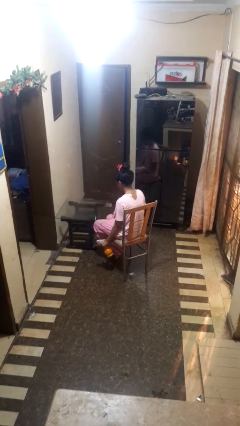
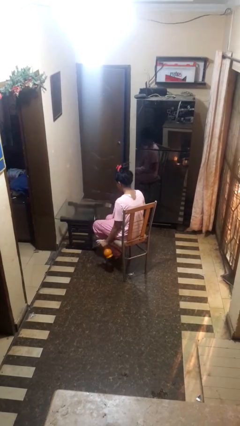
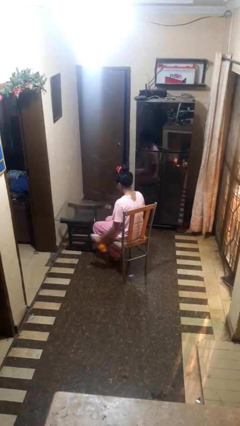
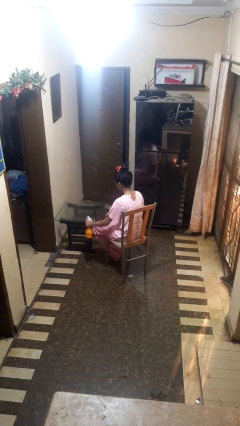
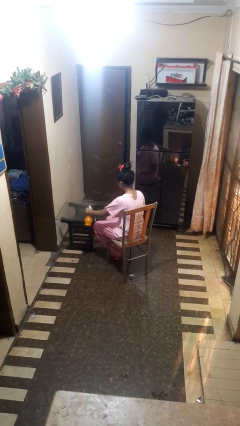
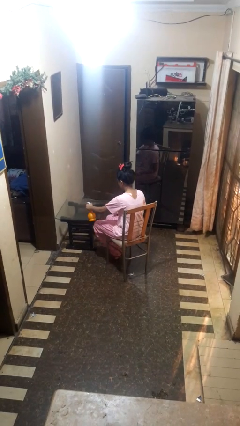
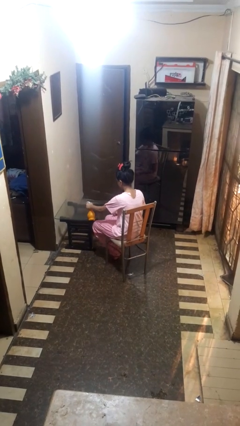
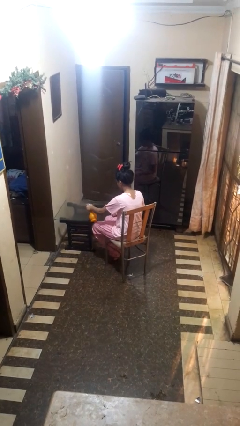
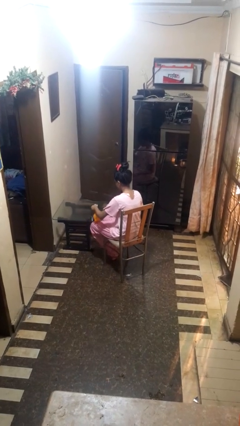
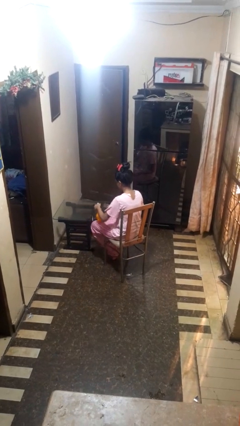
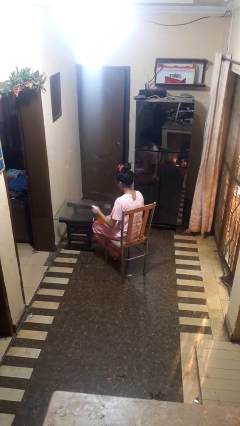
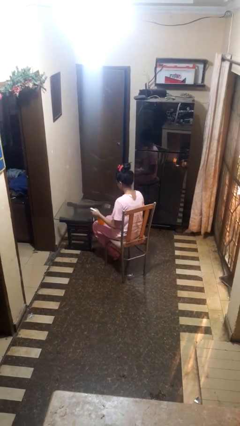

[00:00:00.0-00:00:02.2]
person sprays from bottle

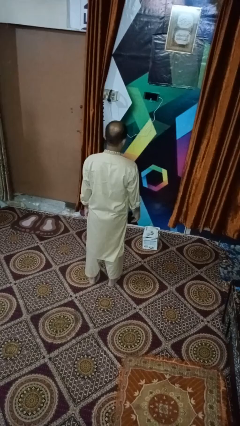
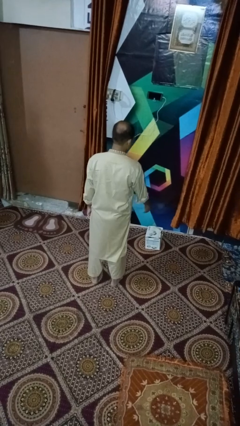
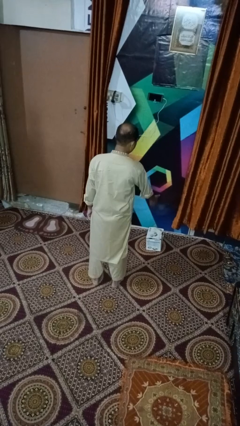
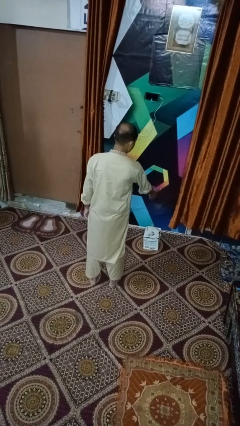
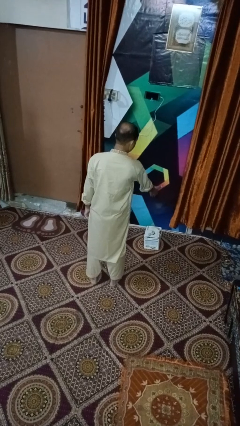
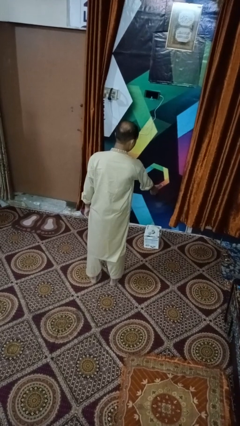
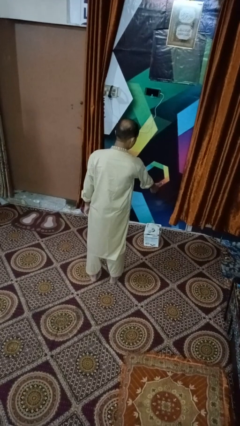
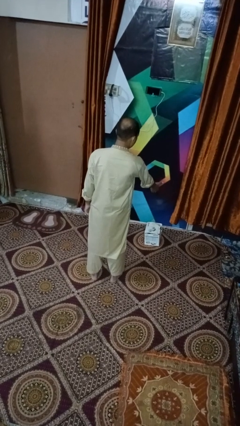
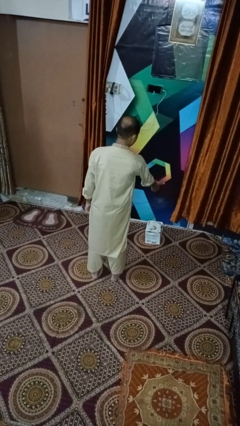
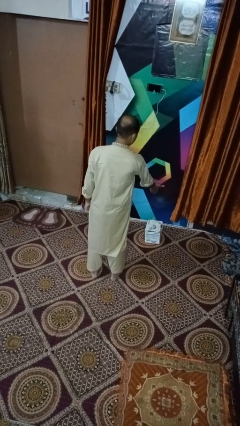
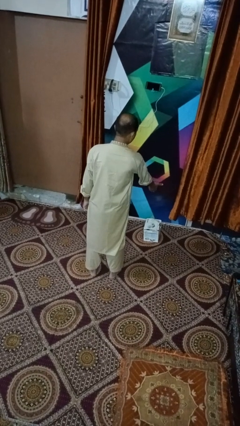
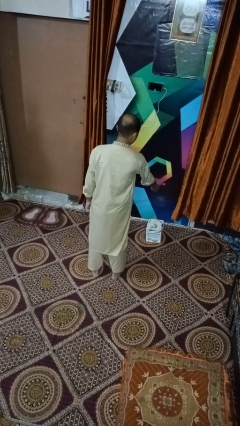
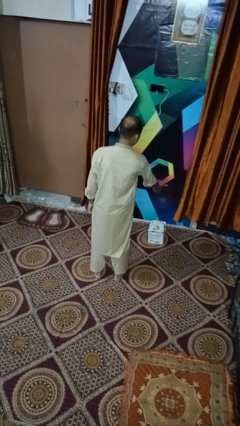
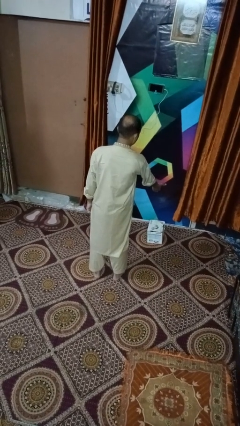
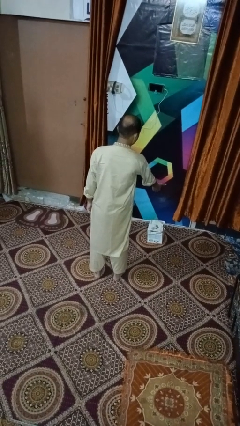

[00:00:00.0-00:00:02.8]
person waves hand over object

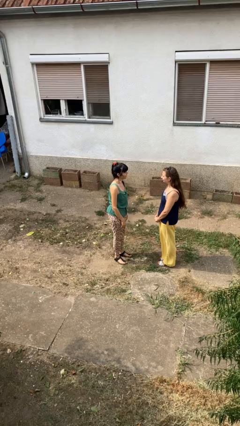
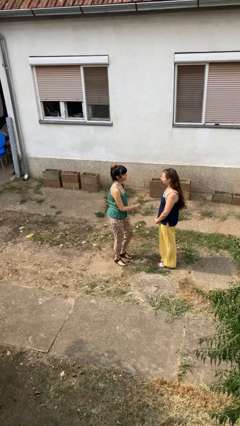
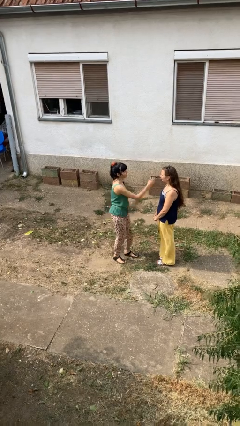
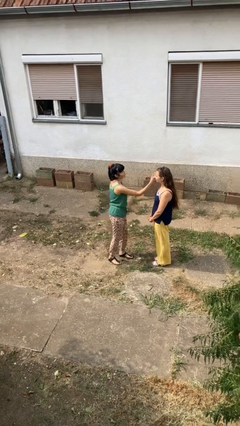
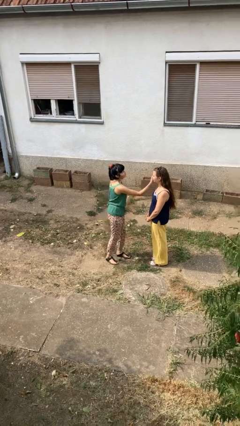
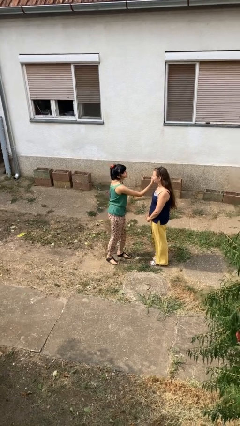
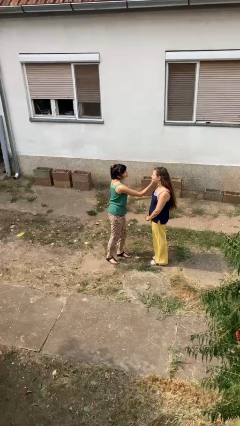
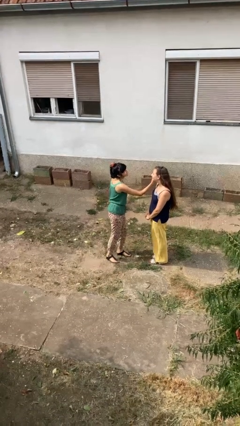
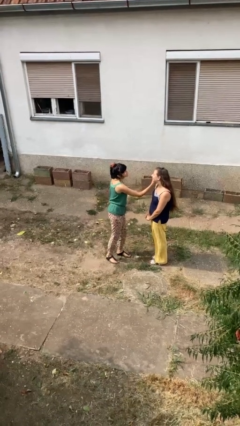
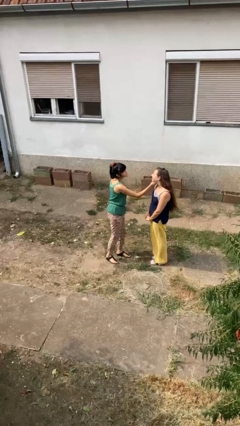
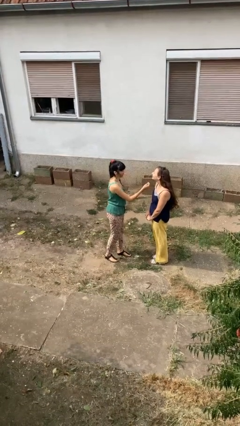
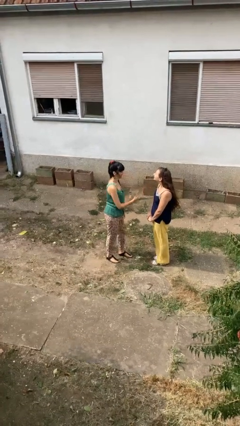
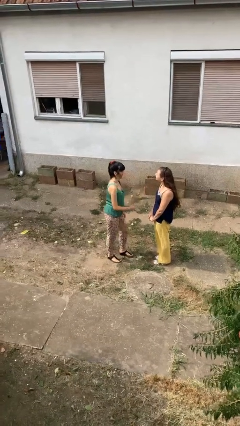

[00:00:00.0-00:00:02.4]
person touches face of person

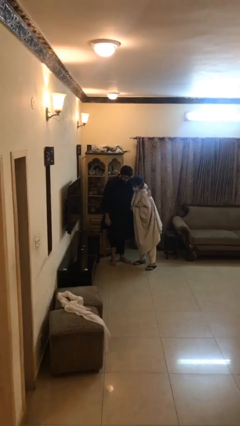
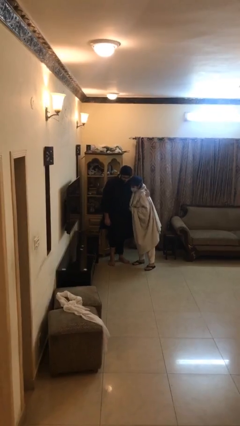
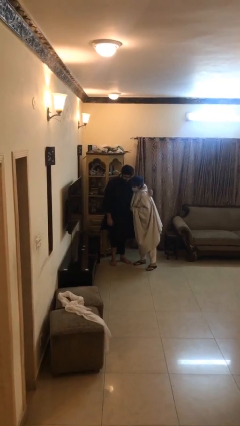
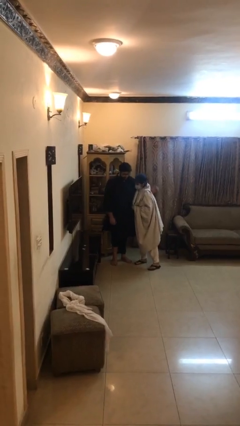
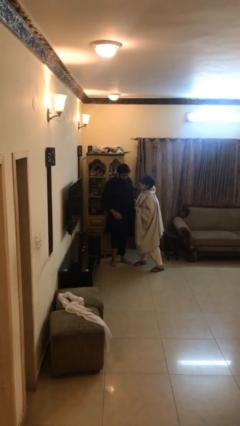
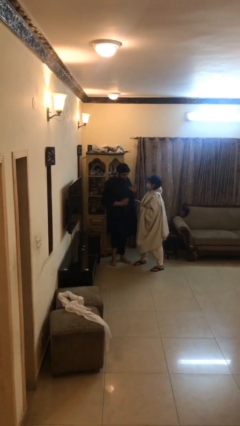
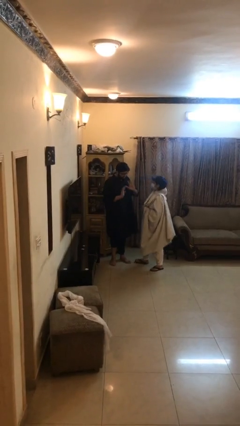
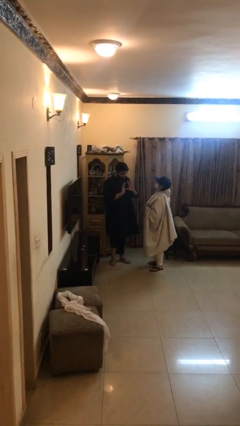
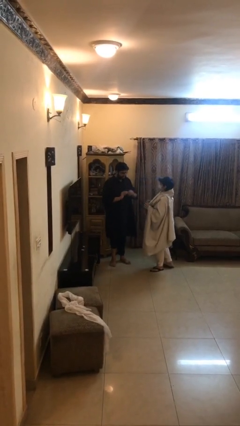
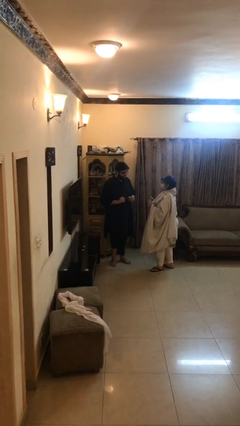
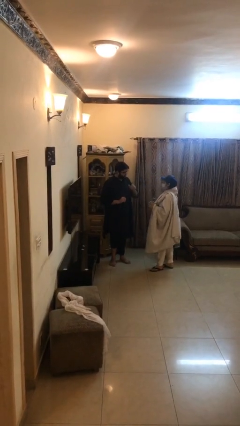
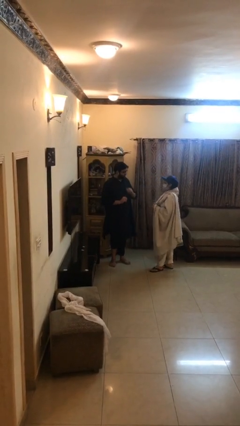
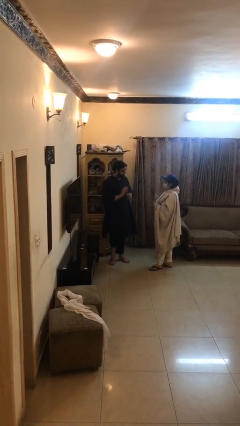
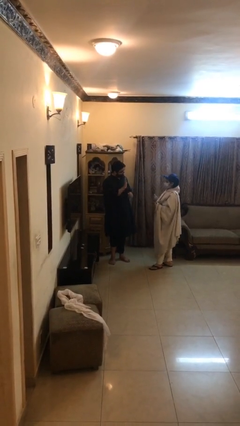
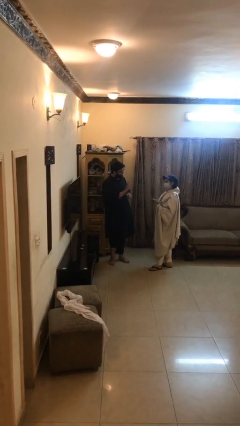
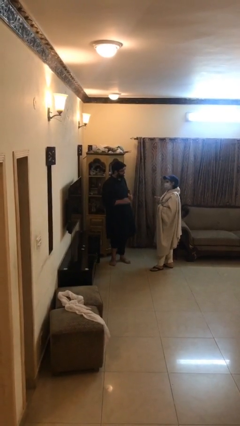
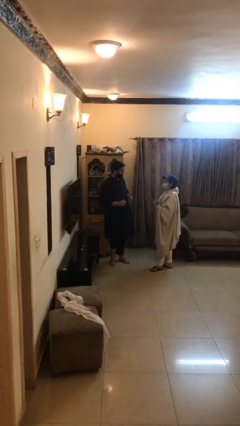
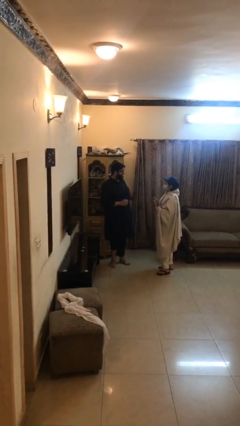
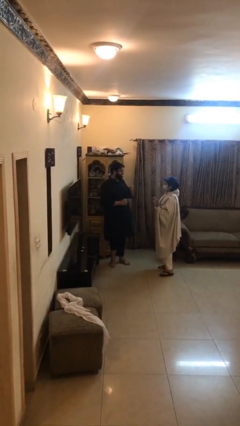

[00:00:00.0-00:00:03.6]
person talks to person

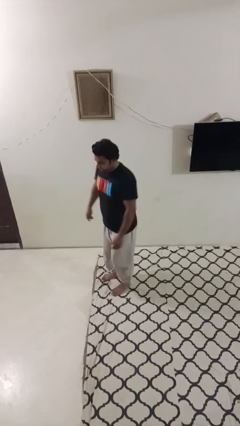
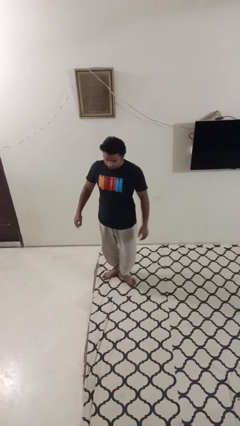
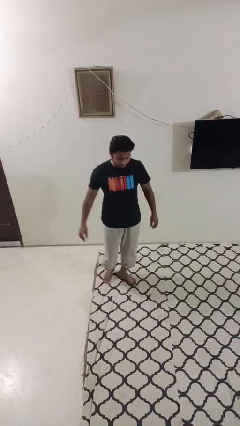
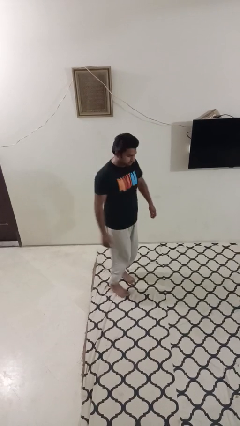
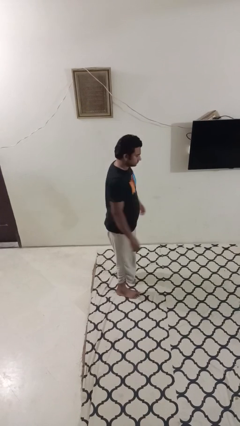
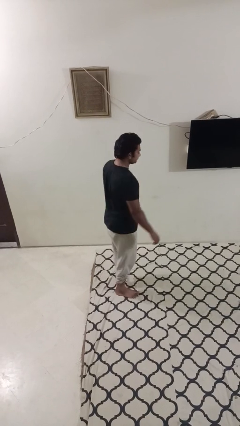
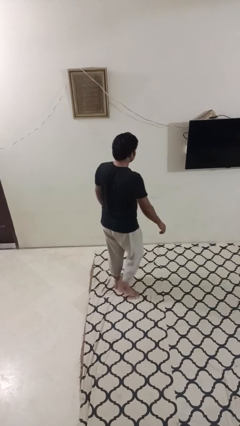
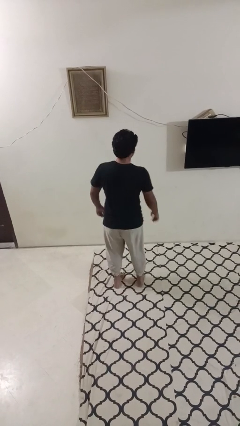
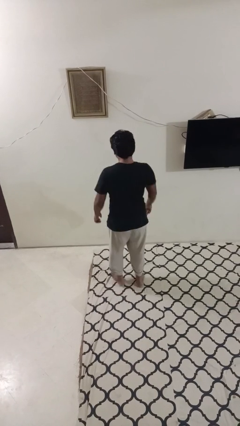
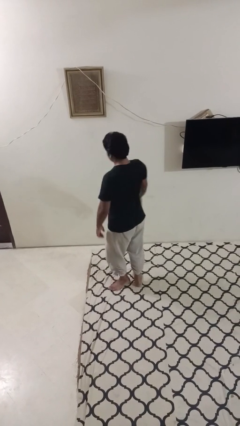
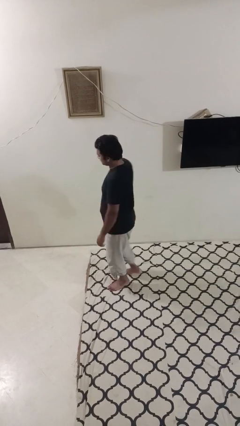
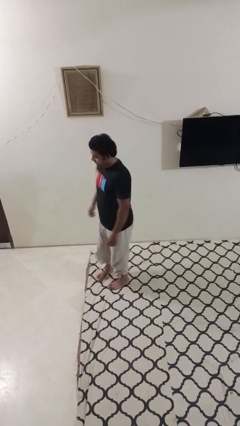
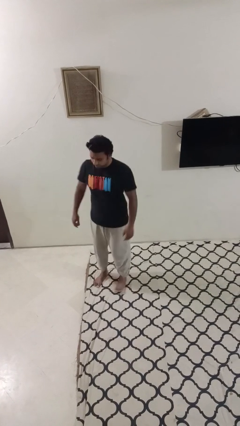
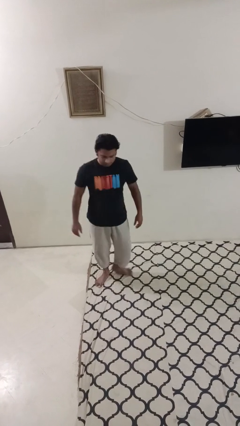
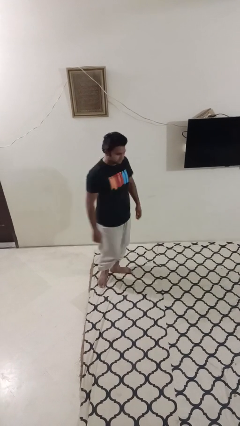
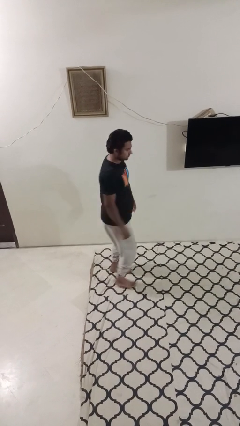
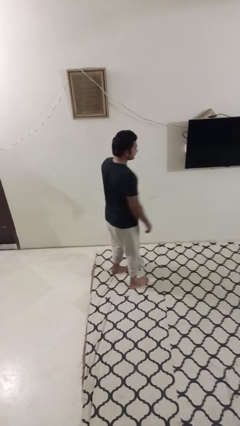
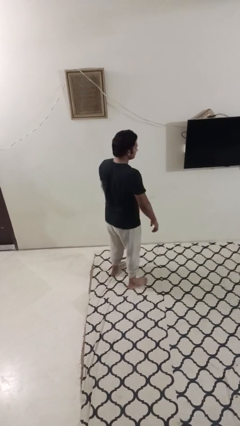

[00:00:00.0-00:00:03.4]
person twirls

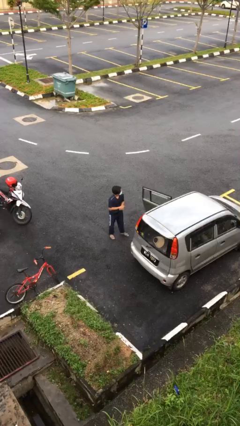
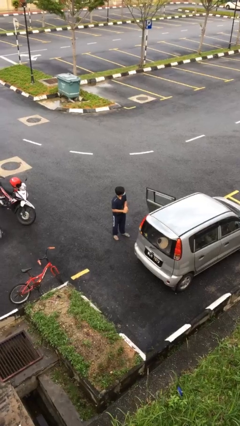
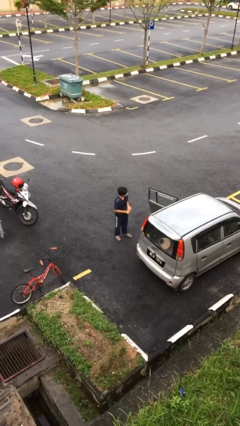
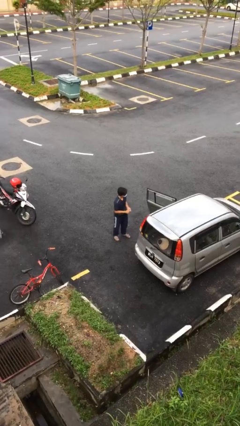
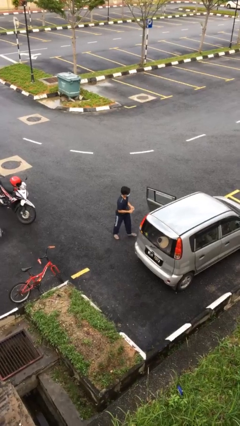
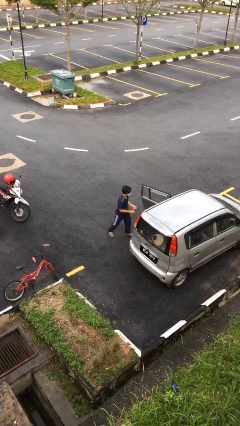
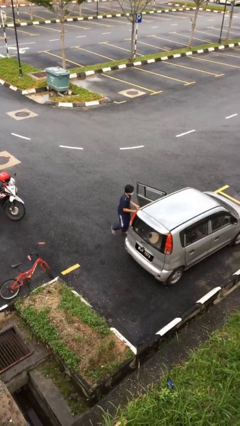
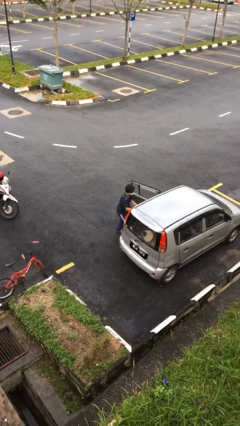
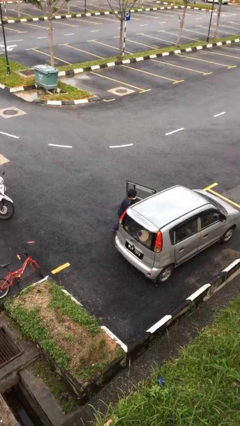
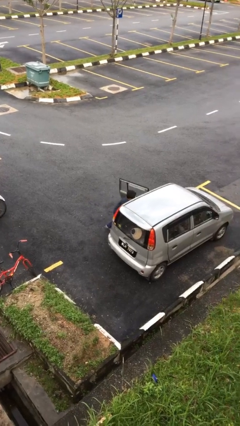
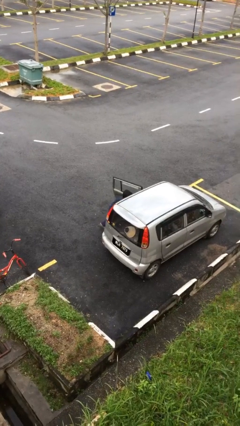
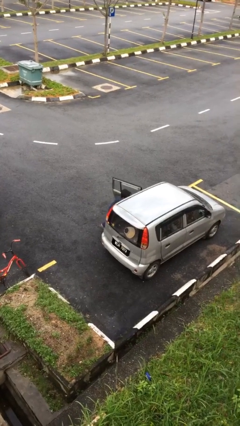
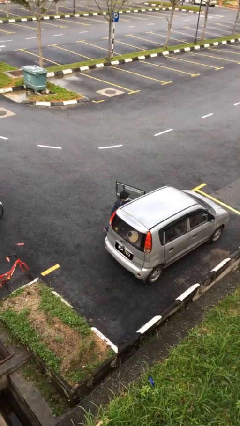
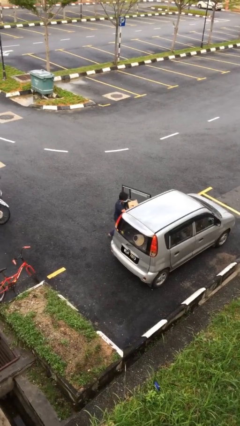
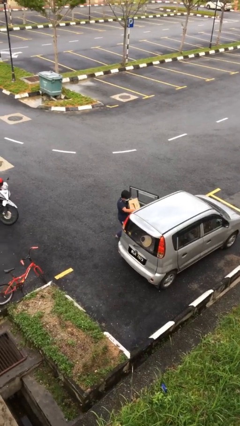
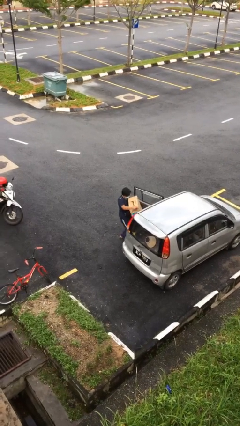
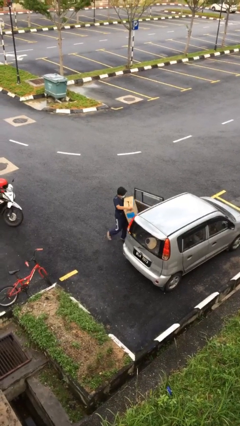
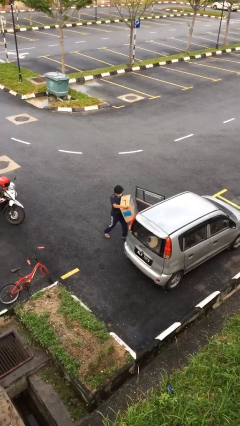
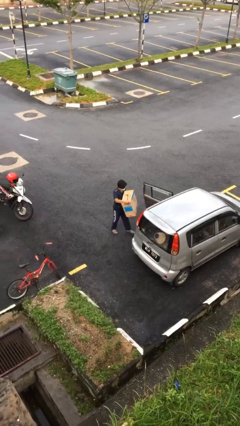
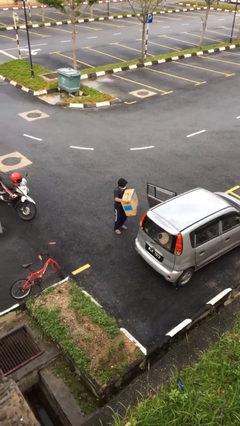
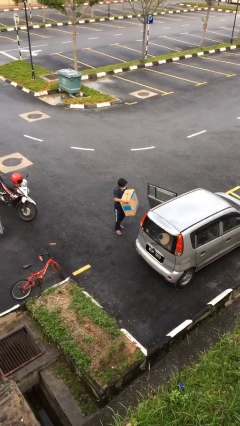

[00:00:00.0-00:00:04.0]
person unloads car
